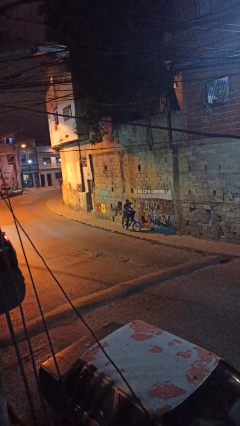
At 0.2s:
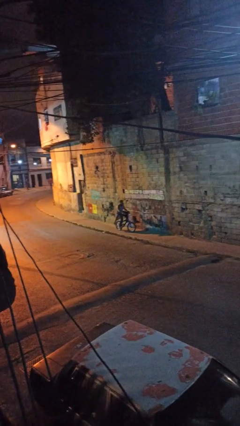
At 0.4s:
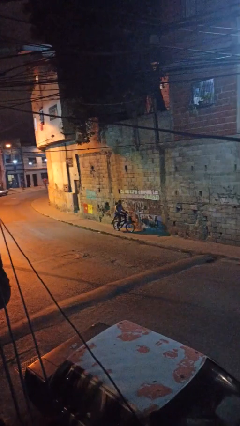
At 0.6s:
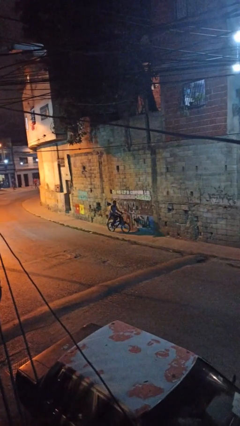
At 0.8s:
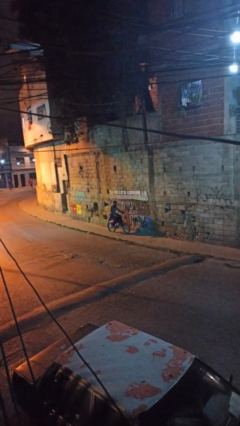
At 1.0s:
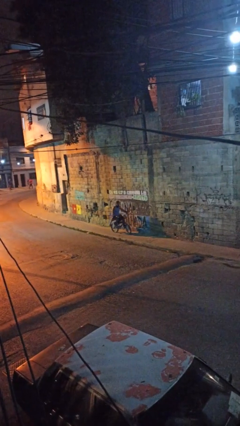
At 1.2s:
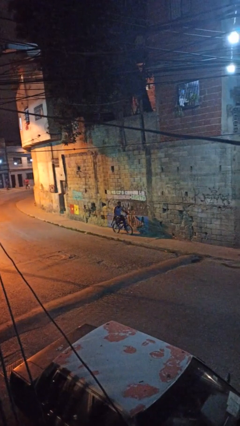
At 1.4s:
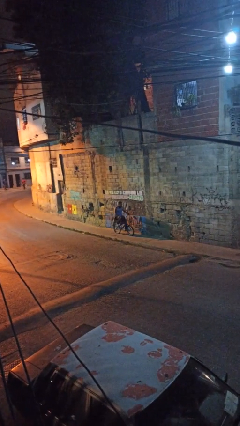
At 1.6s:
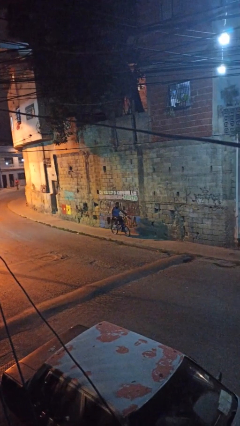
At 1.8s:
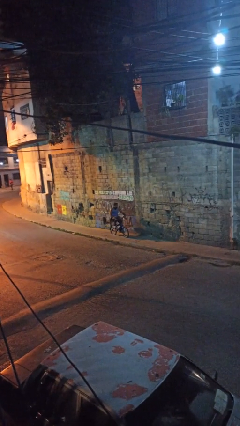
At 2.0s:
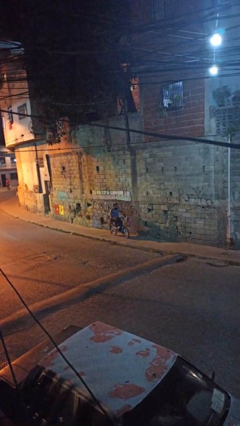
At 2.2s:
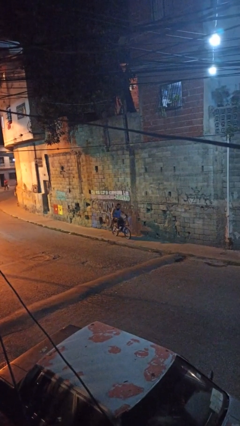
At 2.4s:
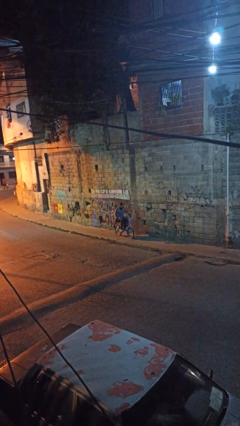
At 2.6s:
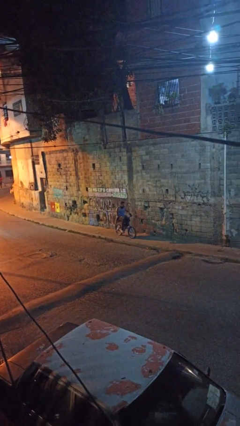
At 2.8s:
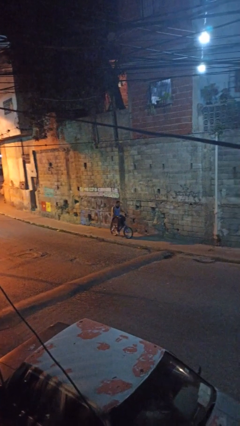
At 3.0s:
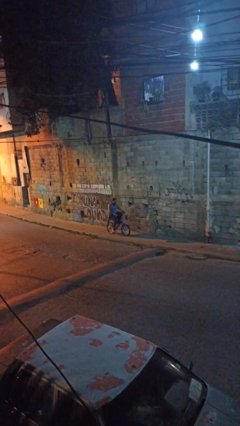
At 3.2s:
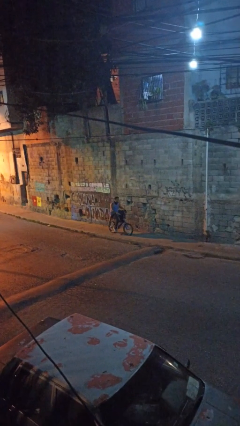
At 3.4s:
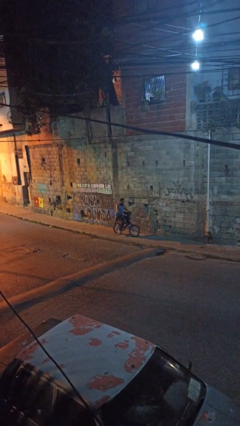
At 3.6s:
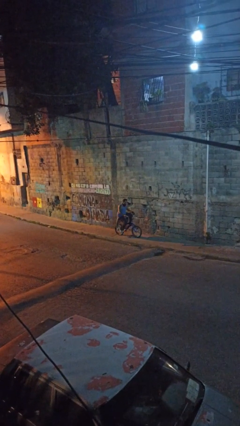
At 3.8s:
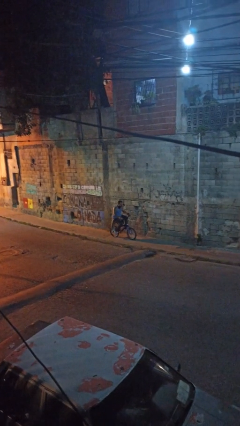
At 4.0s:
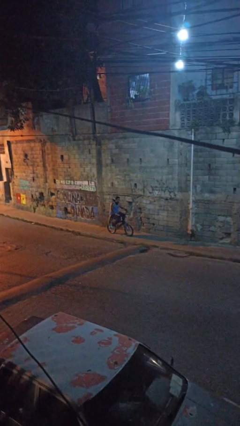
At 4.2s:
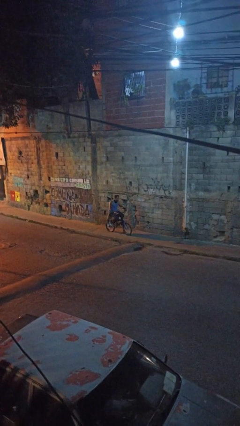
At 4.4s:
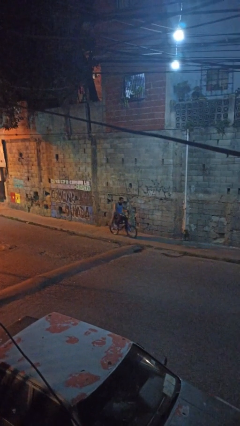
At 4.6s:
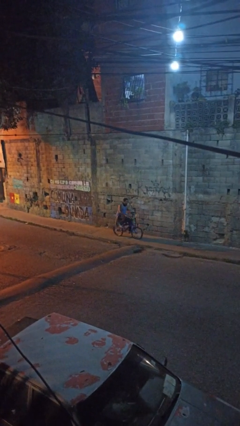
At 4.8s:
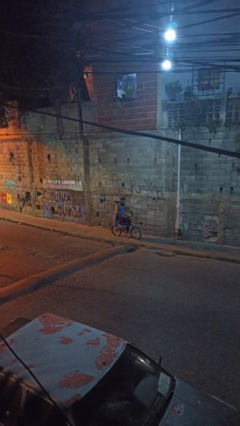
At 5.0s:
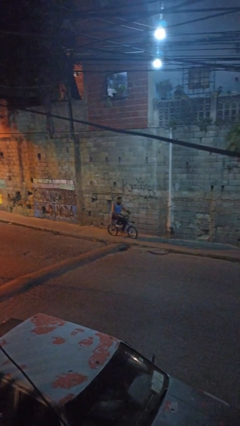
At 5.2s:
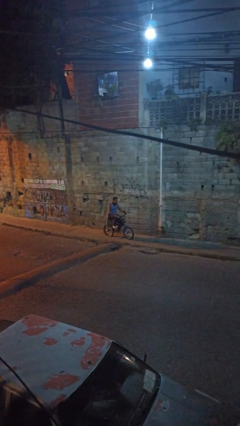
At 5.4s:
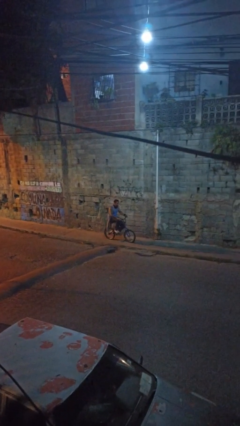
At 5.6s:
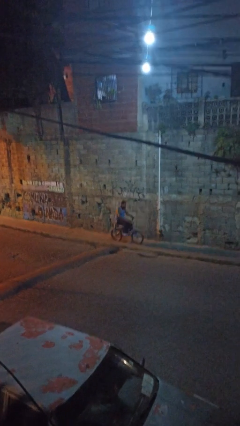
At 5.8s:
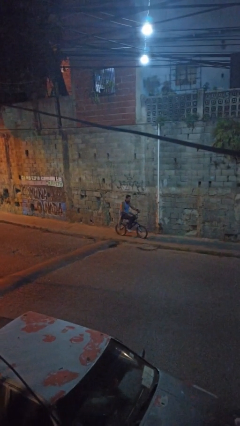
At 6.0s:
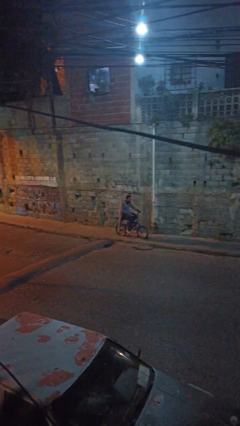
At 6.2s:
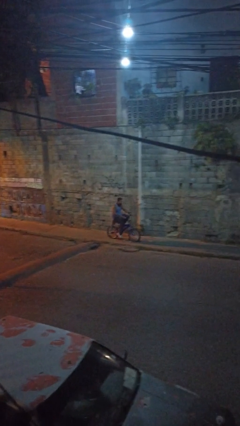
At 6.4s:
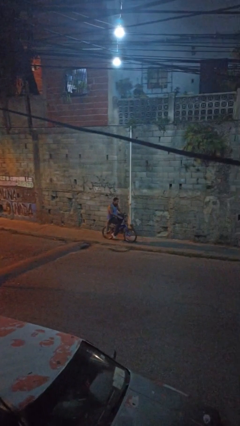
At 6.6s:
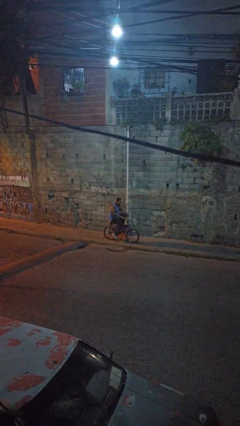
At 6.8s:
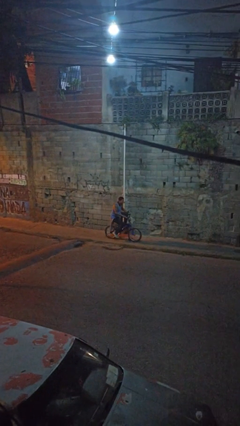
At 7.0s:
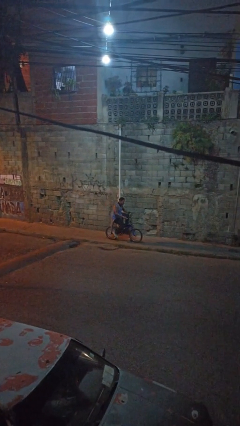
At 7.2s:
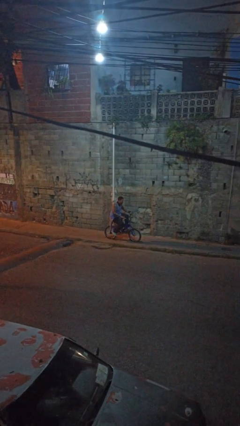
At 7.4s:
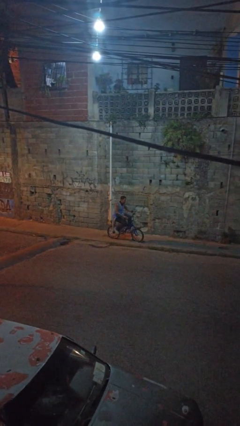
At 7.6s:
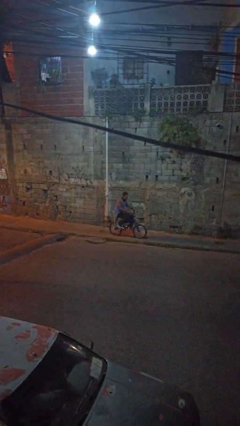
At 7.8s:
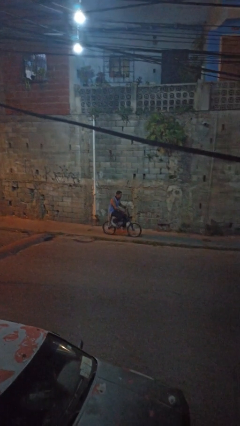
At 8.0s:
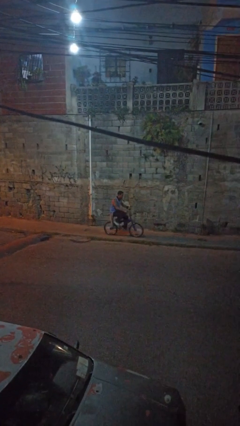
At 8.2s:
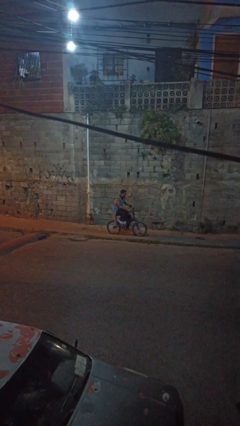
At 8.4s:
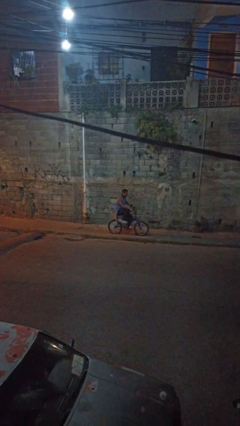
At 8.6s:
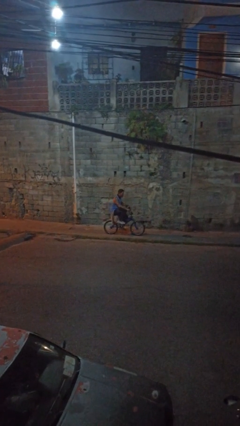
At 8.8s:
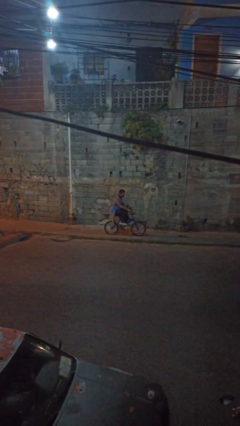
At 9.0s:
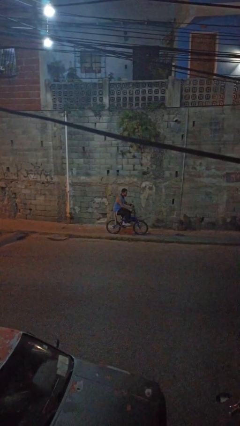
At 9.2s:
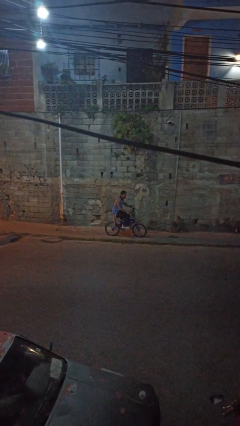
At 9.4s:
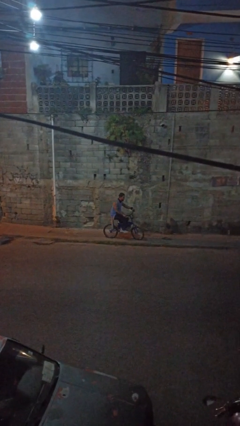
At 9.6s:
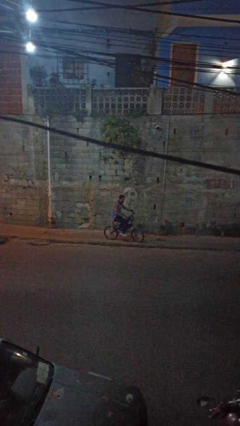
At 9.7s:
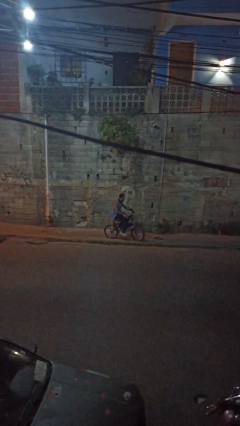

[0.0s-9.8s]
person rides bicycle

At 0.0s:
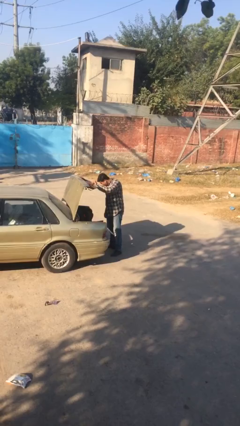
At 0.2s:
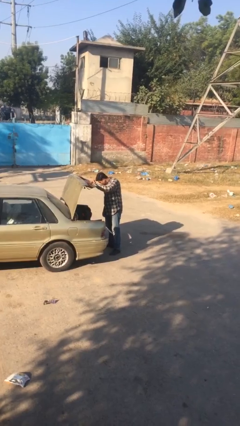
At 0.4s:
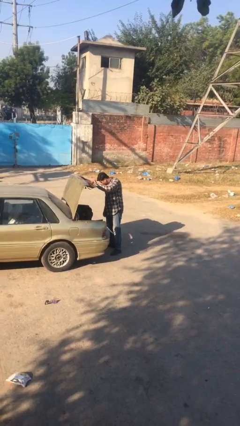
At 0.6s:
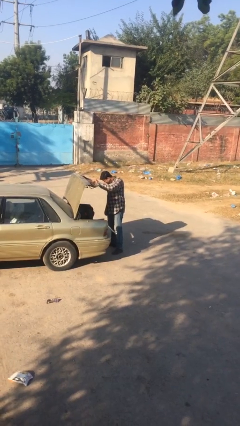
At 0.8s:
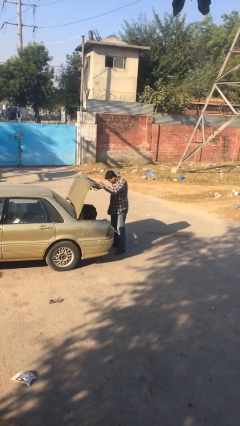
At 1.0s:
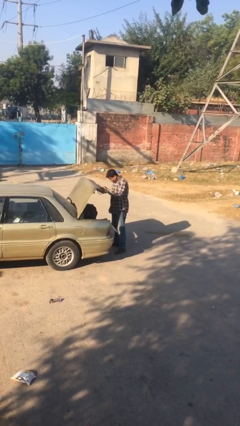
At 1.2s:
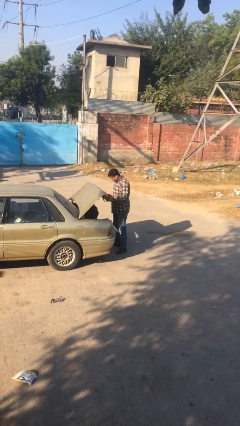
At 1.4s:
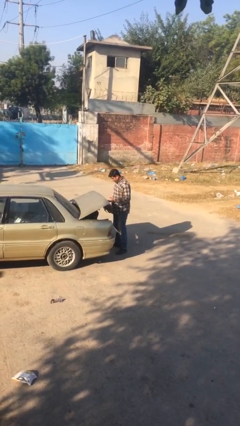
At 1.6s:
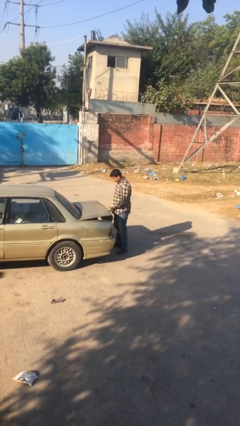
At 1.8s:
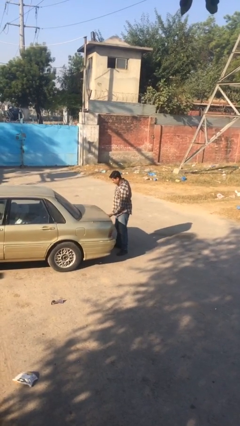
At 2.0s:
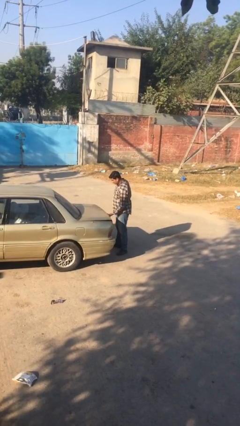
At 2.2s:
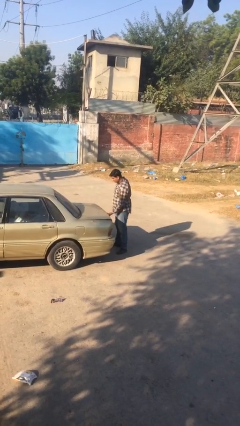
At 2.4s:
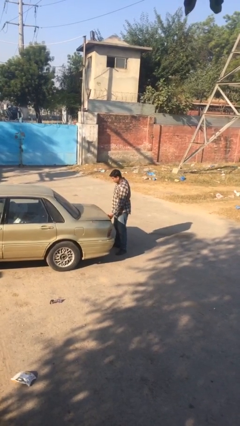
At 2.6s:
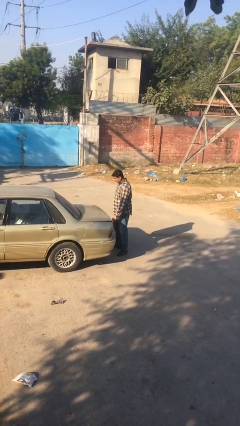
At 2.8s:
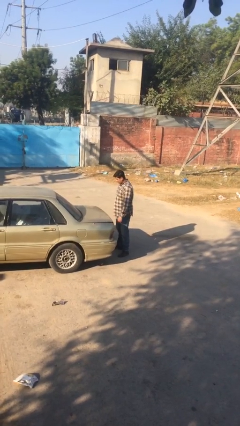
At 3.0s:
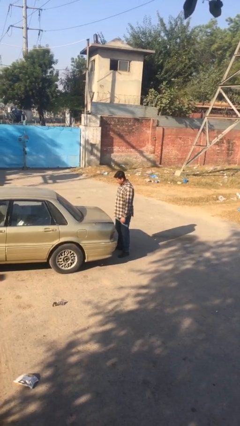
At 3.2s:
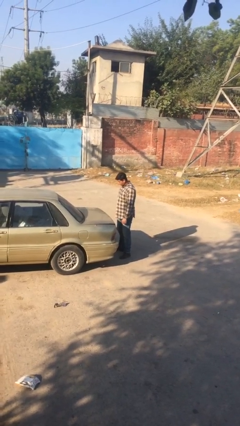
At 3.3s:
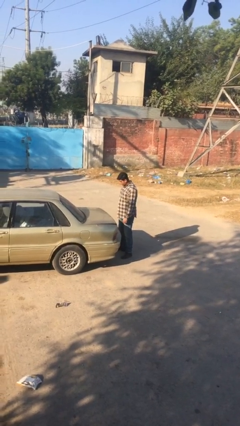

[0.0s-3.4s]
person closes car trunk

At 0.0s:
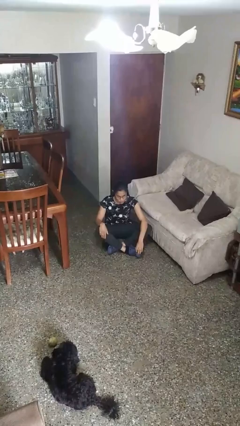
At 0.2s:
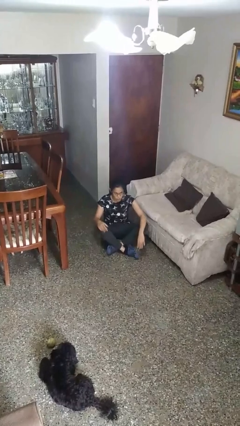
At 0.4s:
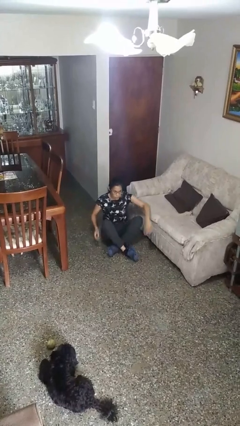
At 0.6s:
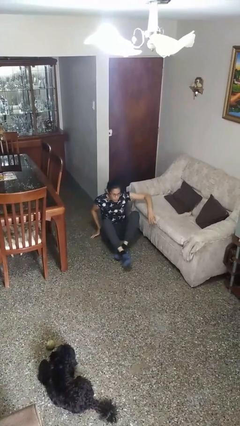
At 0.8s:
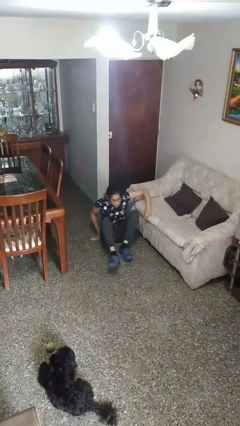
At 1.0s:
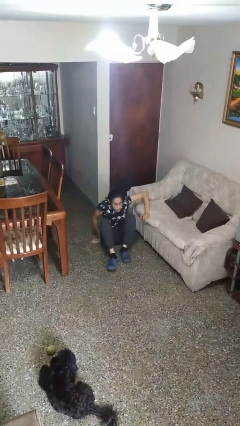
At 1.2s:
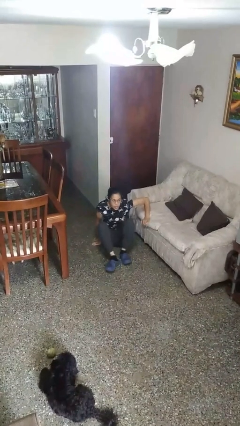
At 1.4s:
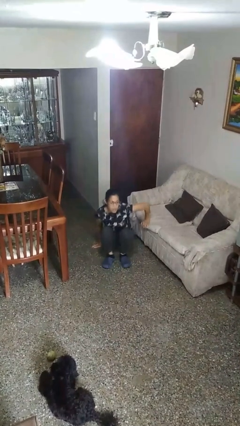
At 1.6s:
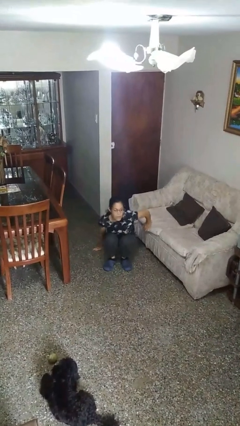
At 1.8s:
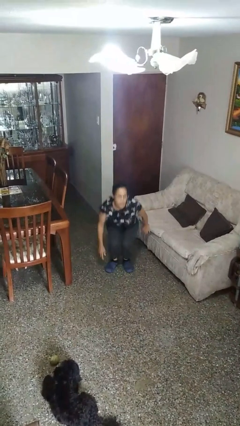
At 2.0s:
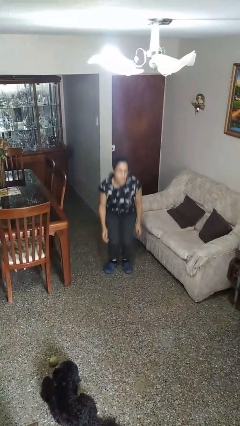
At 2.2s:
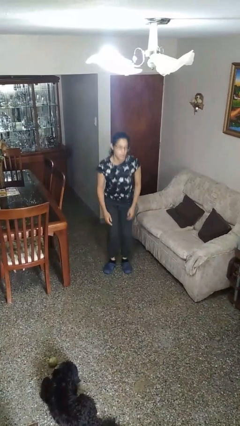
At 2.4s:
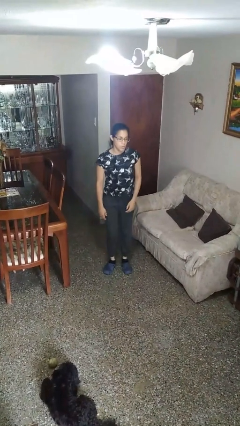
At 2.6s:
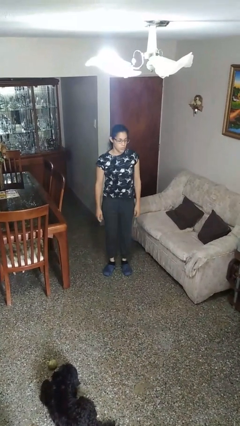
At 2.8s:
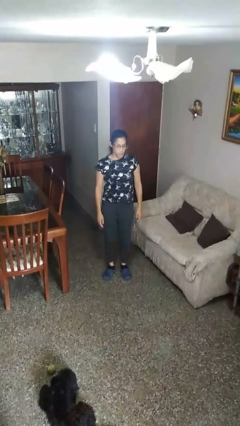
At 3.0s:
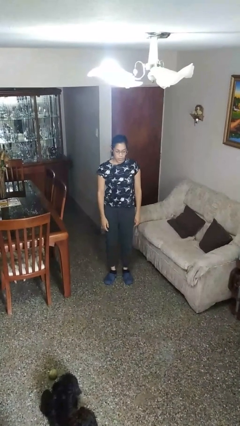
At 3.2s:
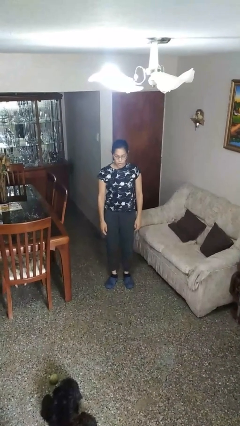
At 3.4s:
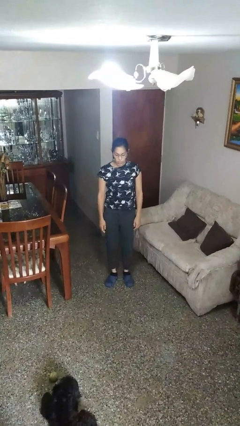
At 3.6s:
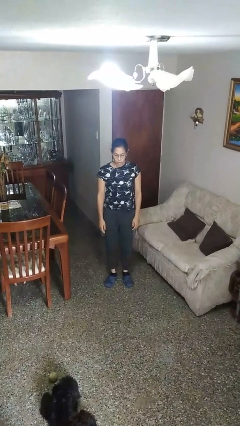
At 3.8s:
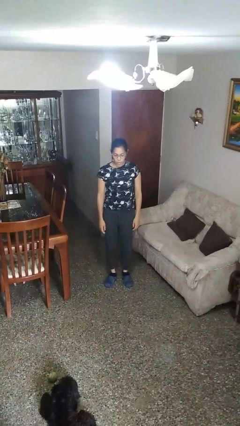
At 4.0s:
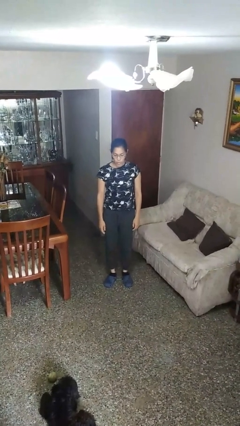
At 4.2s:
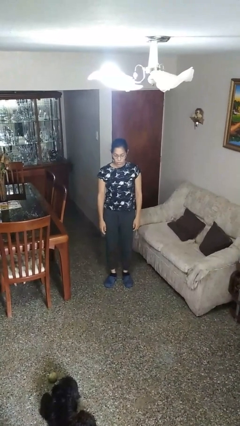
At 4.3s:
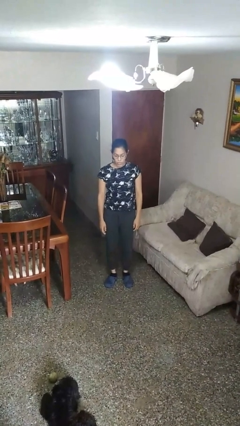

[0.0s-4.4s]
person stands up from floor

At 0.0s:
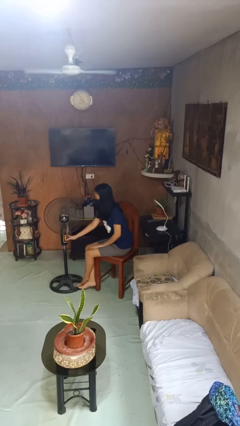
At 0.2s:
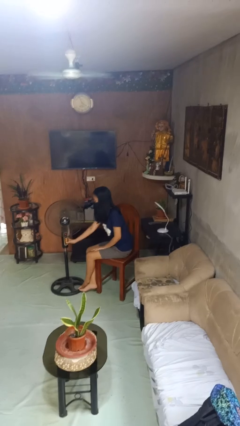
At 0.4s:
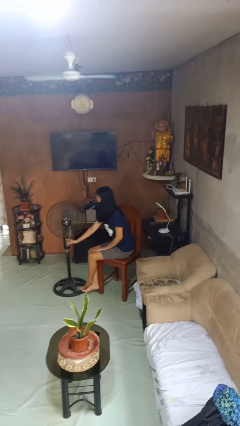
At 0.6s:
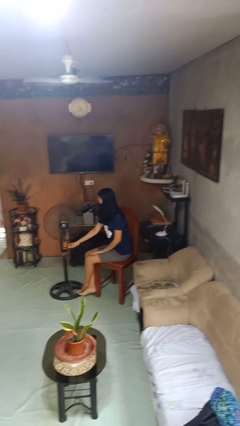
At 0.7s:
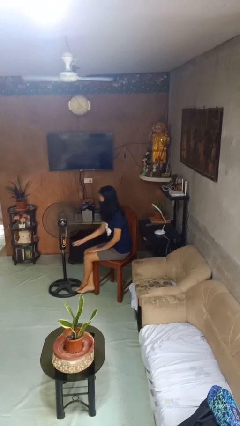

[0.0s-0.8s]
person turns off fan
